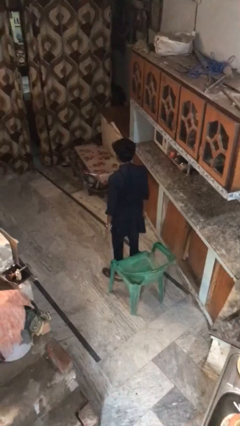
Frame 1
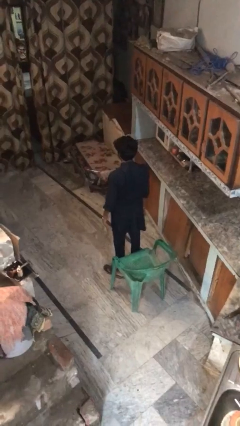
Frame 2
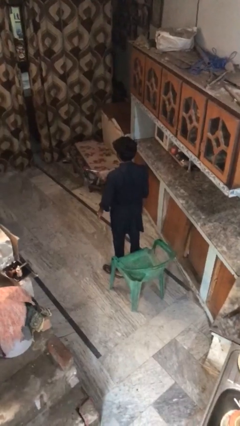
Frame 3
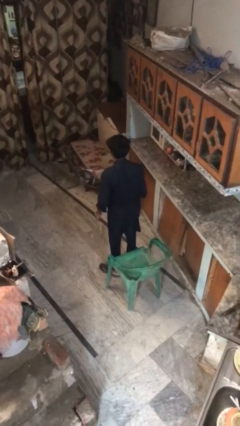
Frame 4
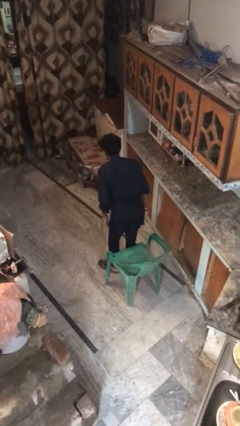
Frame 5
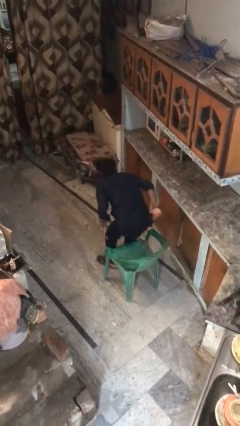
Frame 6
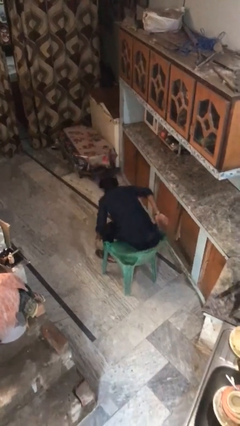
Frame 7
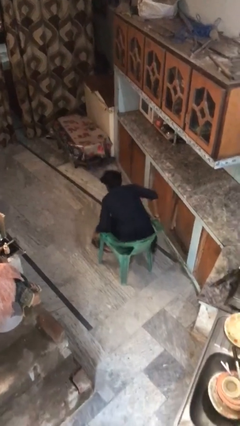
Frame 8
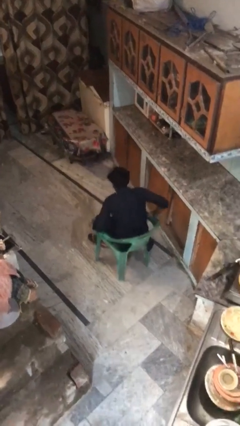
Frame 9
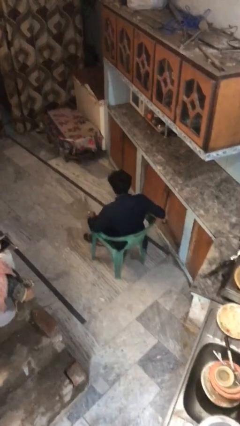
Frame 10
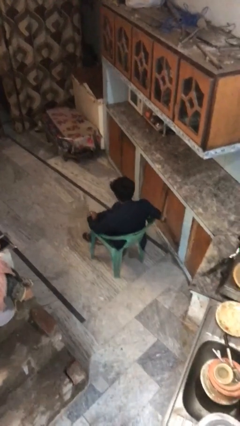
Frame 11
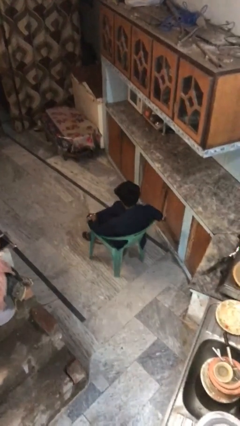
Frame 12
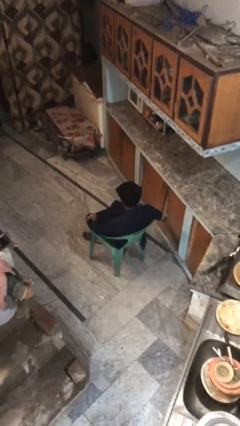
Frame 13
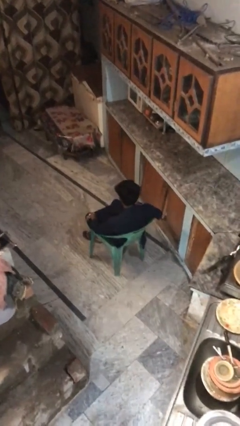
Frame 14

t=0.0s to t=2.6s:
person sits down

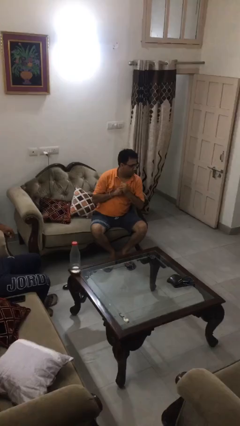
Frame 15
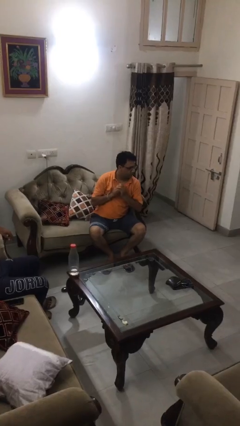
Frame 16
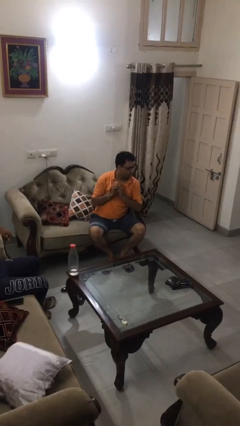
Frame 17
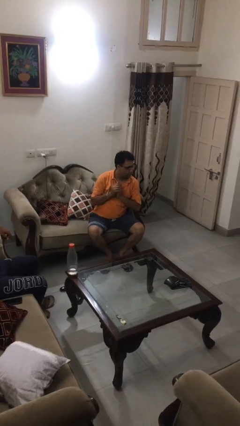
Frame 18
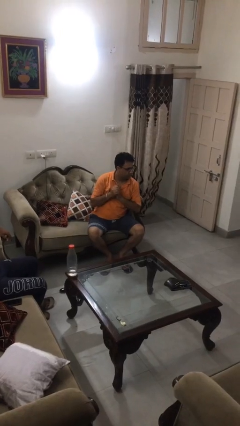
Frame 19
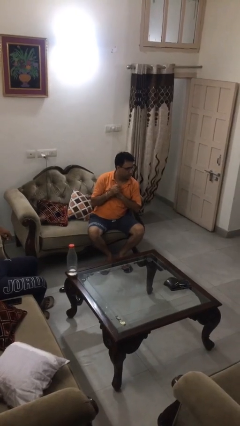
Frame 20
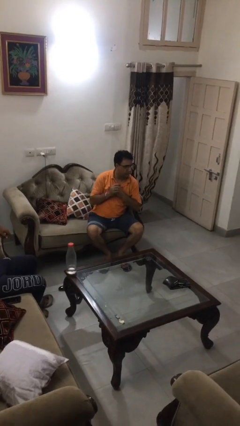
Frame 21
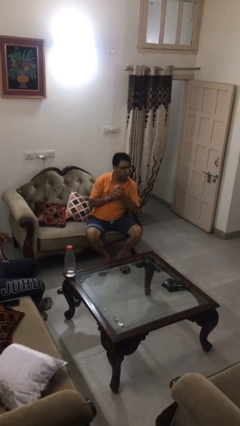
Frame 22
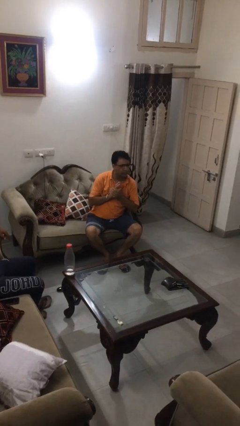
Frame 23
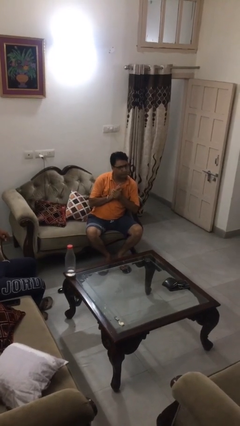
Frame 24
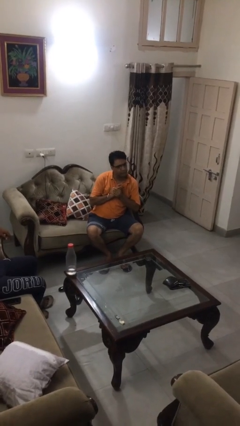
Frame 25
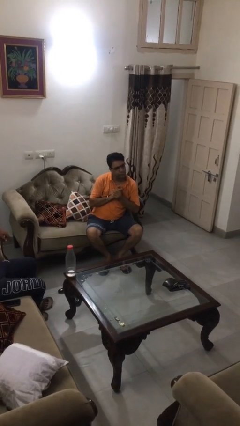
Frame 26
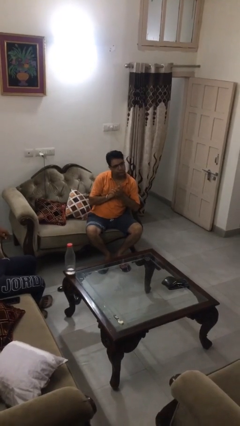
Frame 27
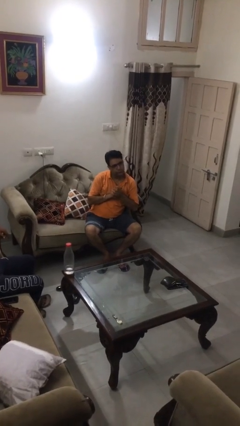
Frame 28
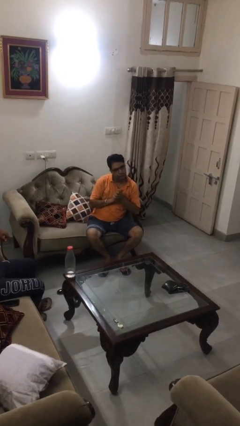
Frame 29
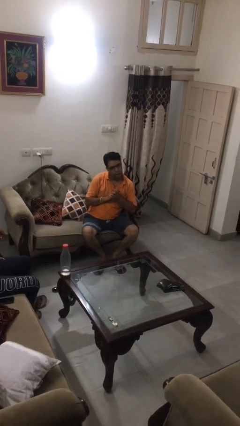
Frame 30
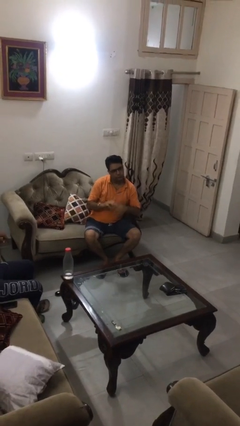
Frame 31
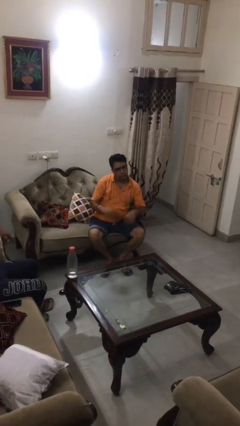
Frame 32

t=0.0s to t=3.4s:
person cracks knuckles

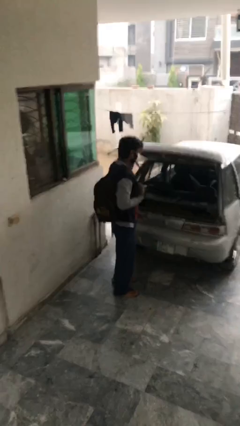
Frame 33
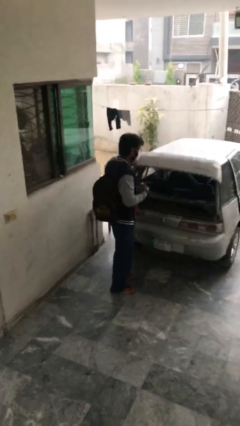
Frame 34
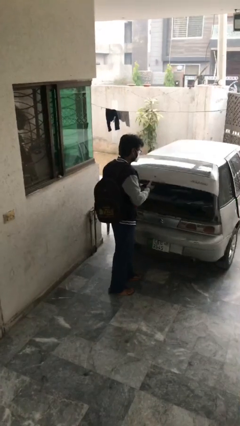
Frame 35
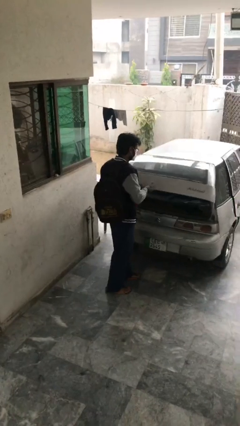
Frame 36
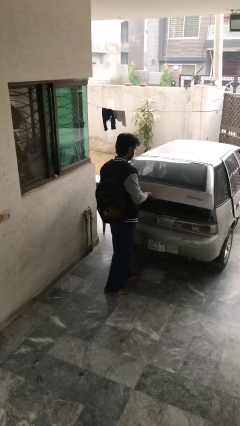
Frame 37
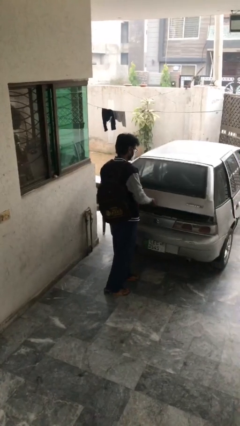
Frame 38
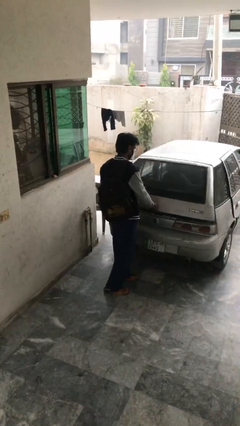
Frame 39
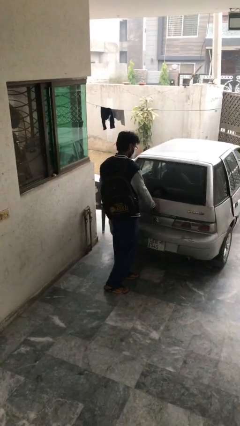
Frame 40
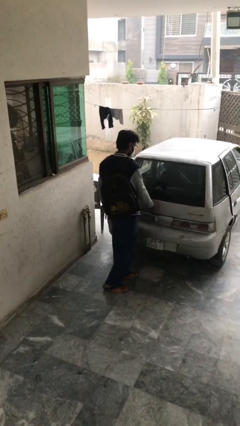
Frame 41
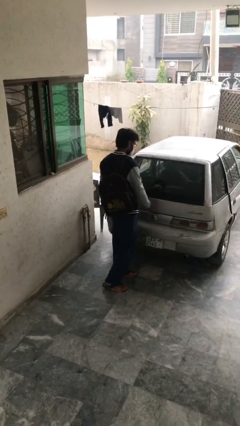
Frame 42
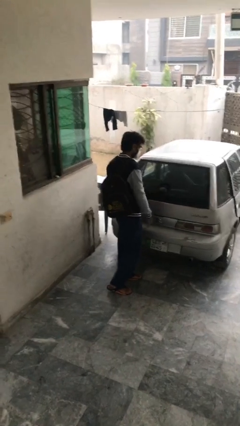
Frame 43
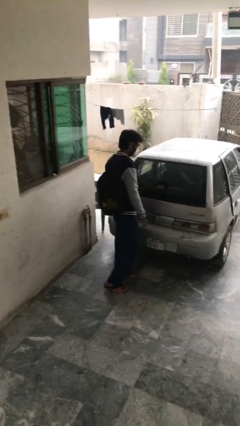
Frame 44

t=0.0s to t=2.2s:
person closes car trunk

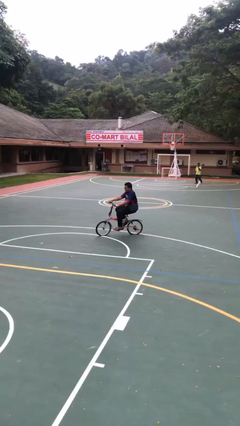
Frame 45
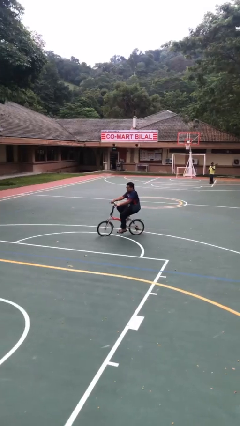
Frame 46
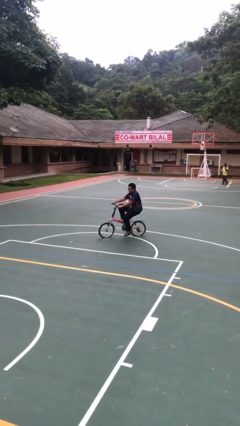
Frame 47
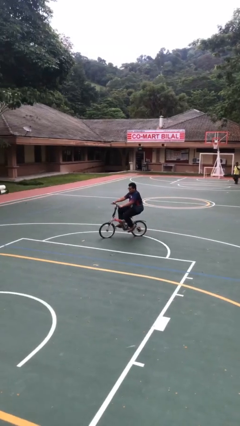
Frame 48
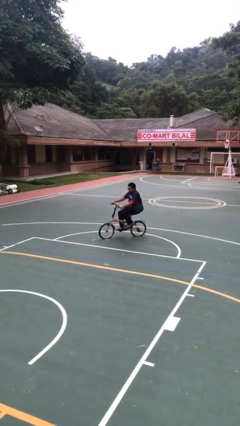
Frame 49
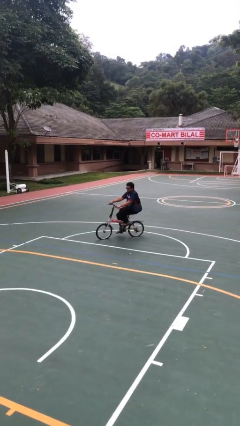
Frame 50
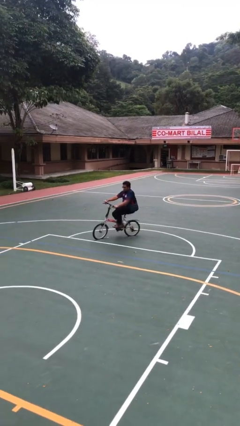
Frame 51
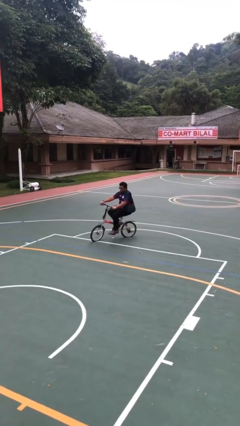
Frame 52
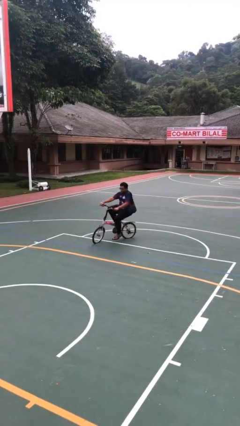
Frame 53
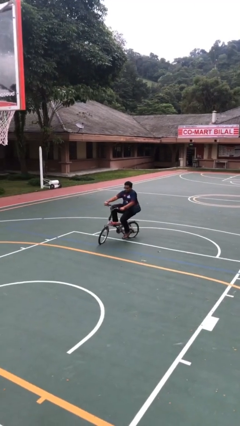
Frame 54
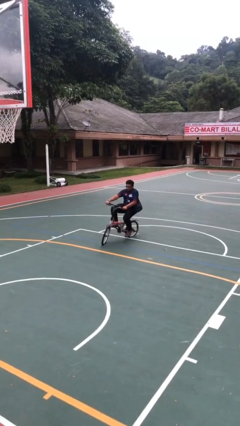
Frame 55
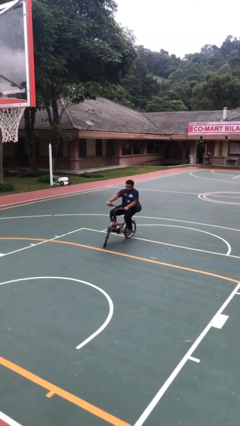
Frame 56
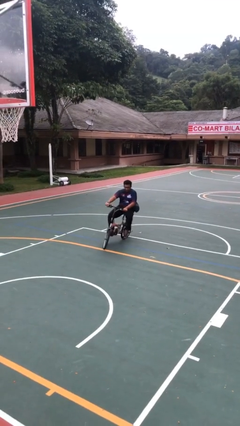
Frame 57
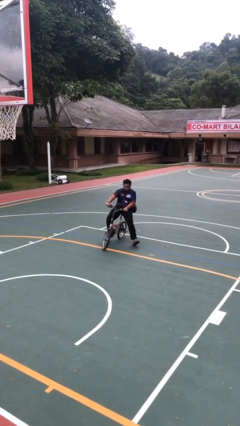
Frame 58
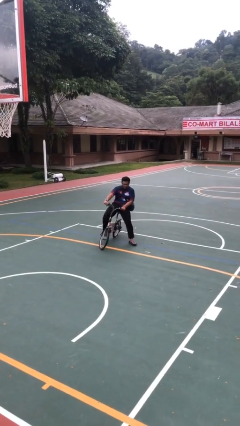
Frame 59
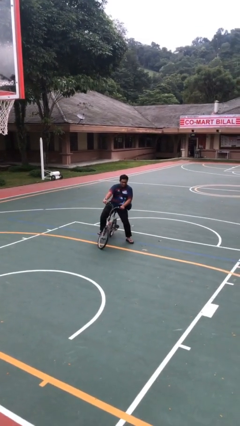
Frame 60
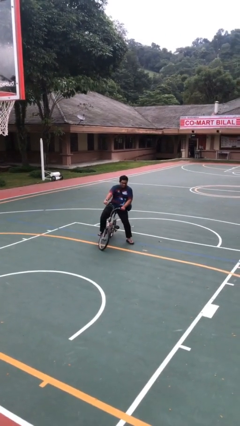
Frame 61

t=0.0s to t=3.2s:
person rides bicycle

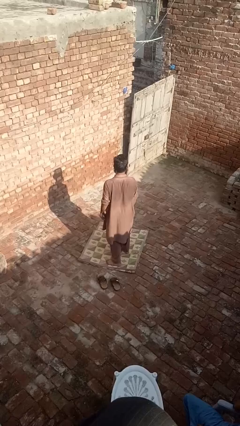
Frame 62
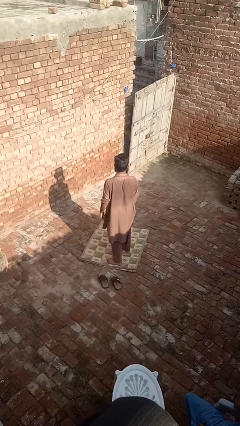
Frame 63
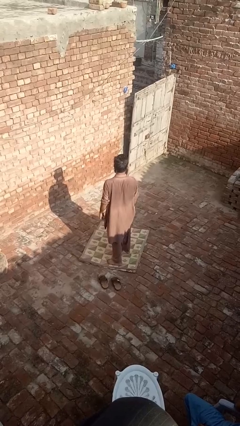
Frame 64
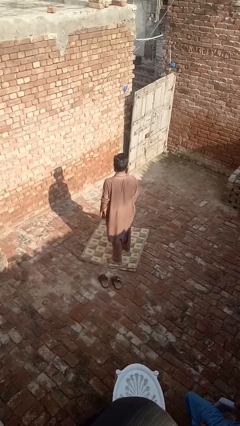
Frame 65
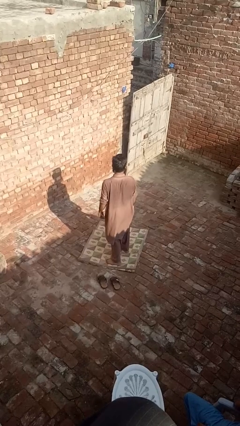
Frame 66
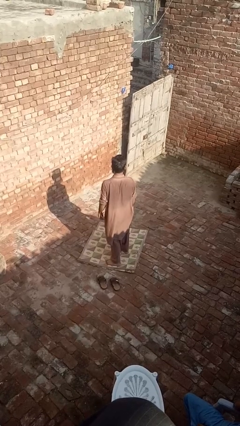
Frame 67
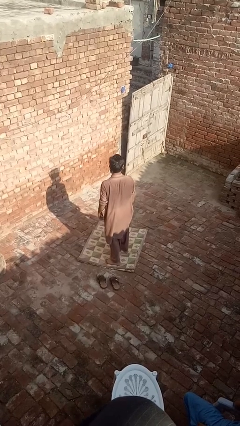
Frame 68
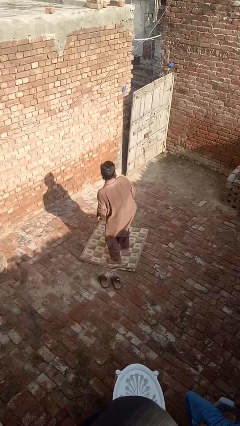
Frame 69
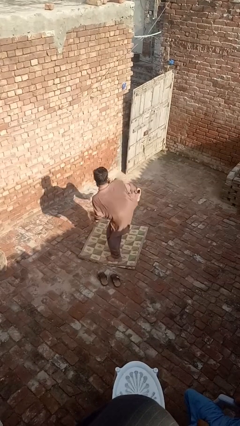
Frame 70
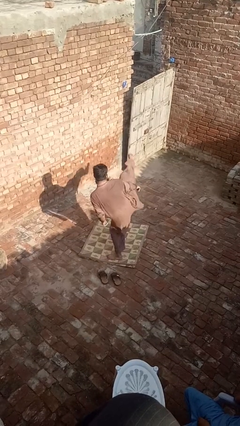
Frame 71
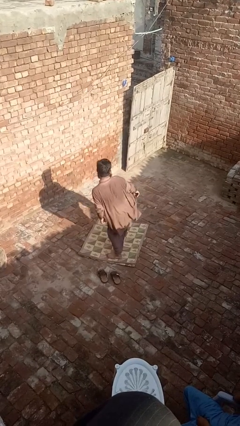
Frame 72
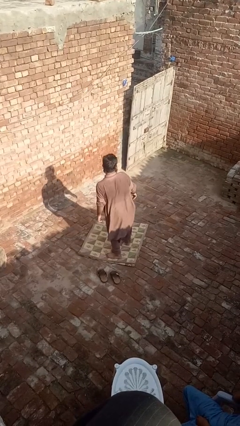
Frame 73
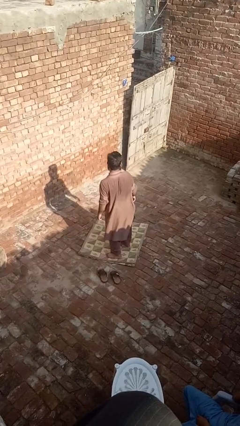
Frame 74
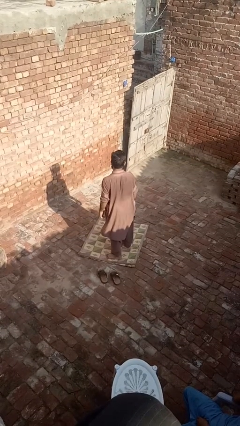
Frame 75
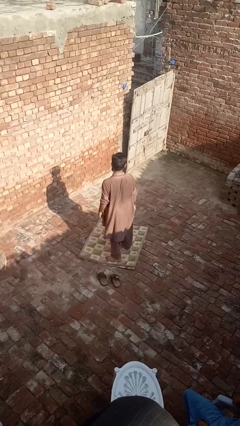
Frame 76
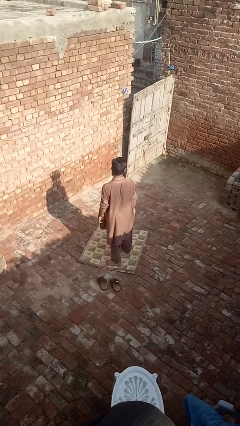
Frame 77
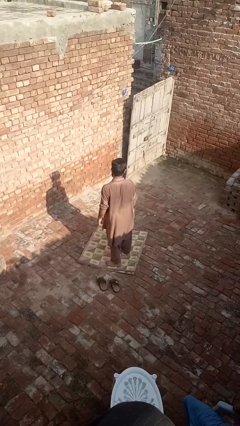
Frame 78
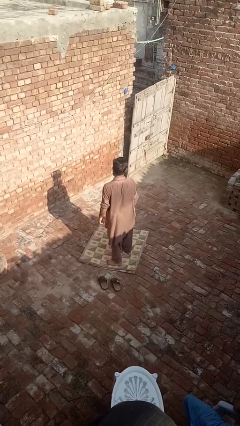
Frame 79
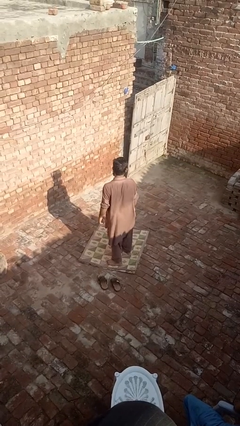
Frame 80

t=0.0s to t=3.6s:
person karate kicks

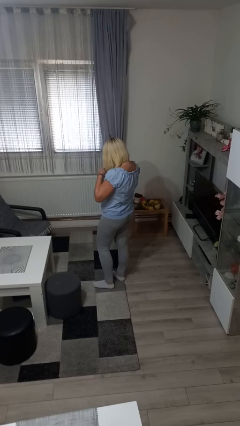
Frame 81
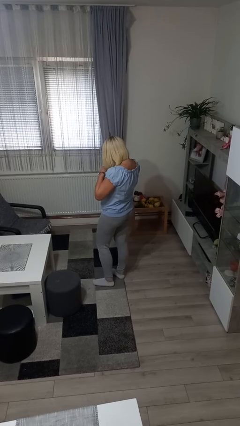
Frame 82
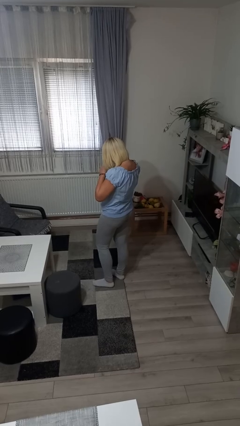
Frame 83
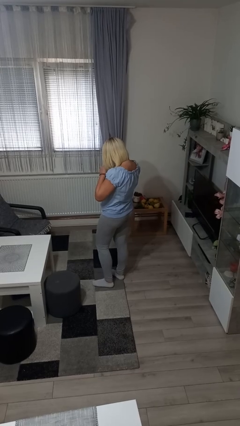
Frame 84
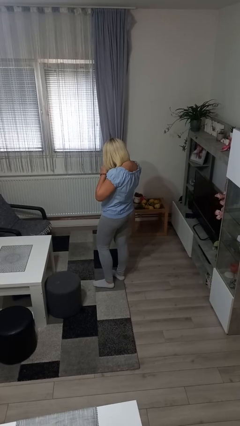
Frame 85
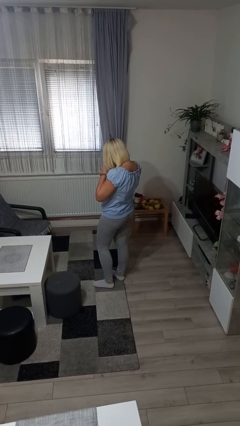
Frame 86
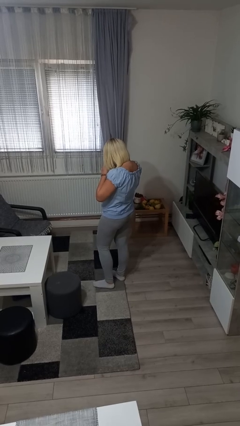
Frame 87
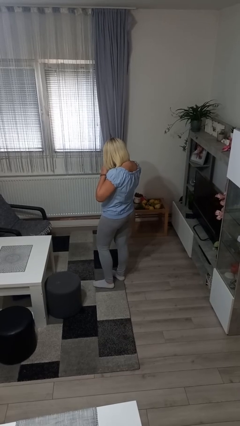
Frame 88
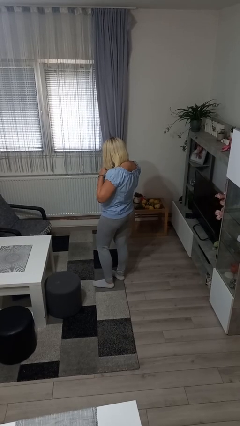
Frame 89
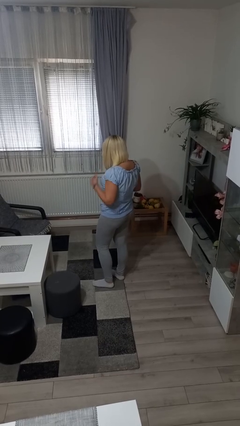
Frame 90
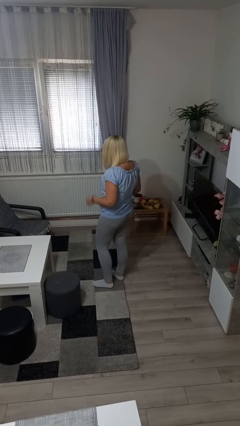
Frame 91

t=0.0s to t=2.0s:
person buttons shirt
